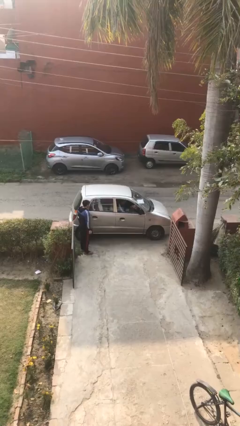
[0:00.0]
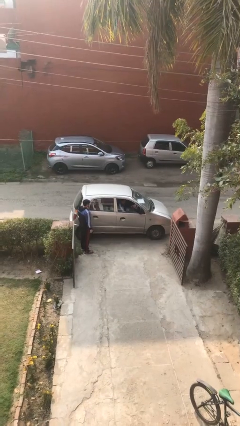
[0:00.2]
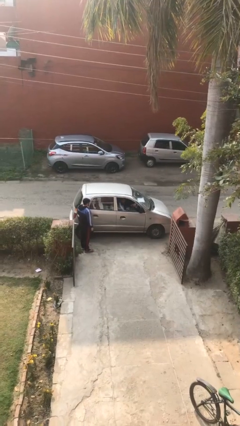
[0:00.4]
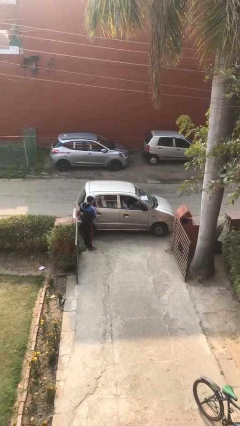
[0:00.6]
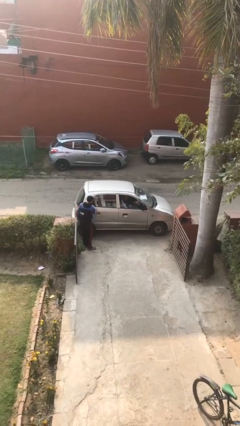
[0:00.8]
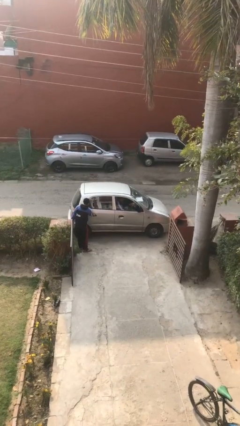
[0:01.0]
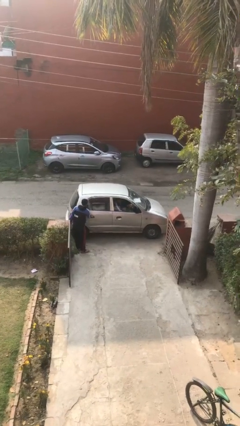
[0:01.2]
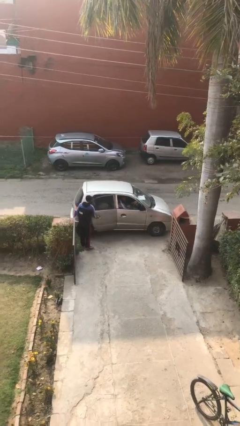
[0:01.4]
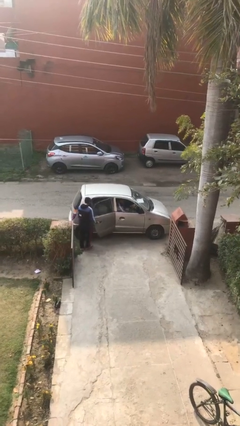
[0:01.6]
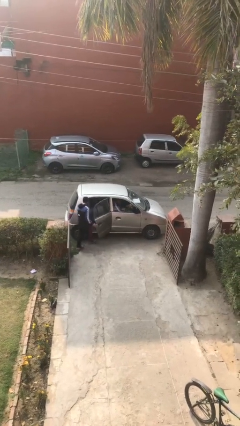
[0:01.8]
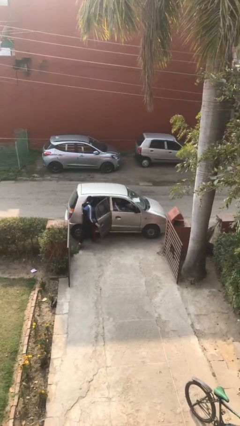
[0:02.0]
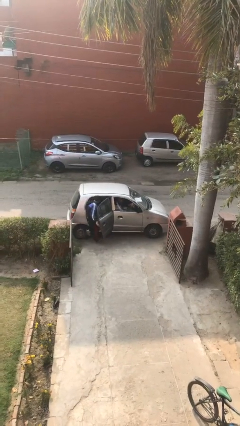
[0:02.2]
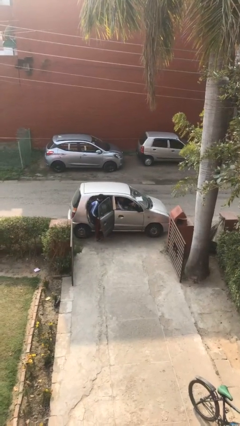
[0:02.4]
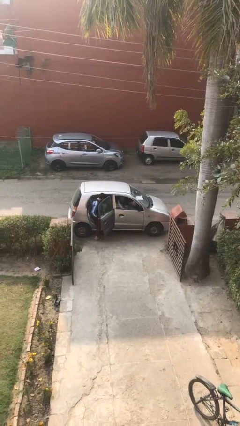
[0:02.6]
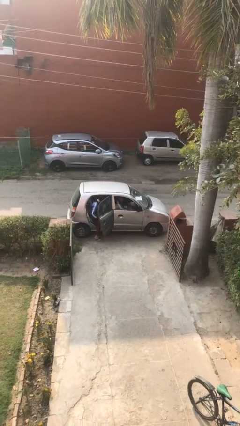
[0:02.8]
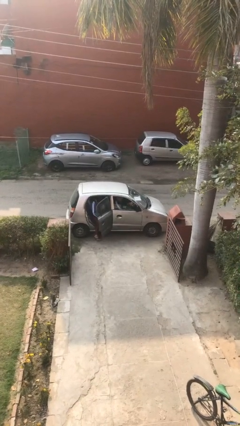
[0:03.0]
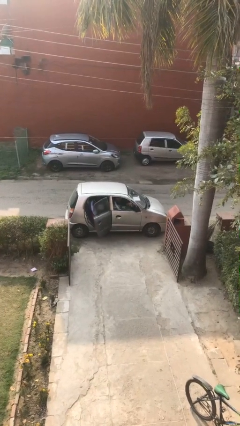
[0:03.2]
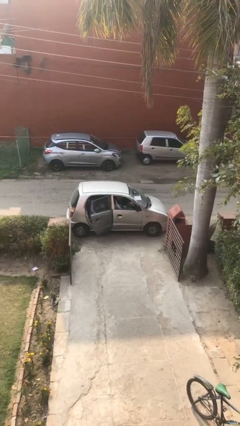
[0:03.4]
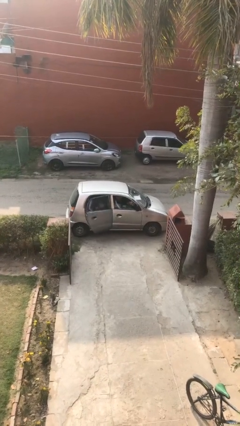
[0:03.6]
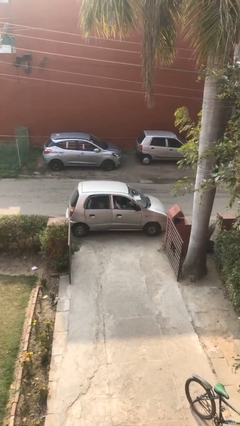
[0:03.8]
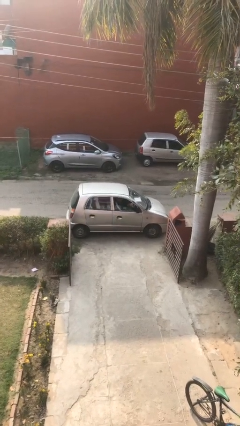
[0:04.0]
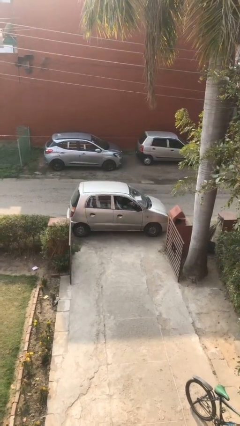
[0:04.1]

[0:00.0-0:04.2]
car picks up person

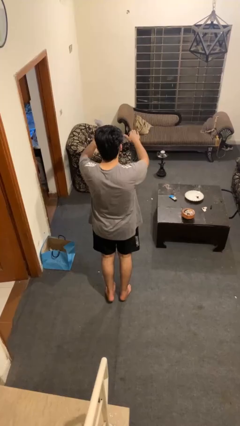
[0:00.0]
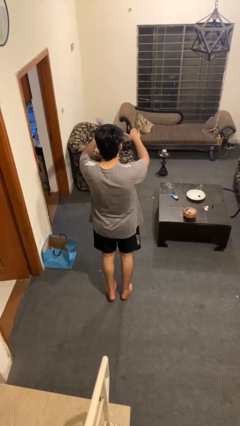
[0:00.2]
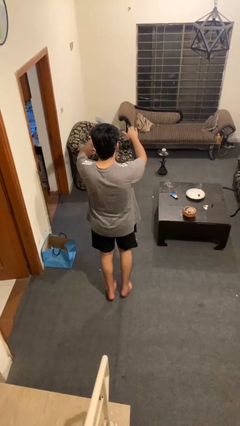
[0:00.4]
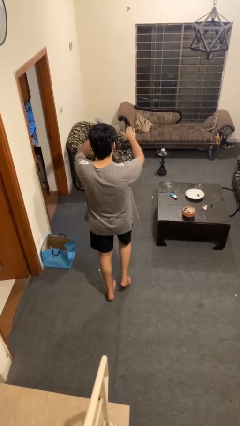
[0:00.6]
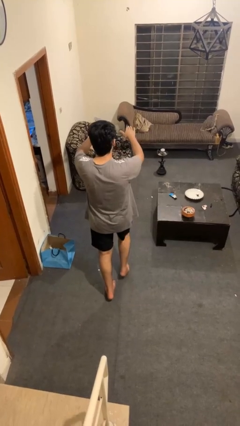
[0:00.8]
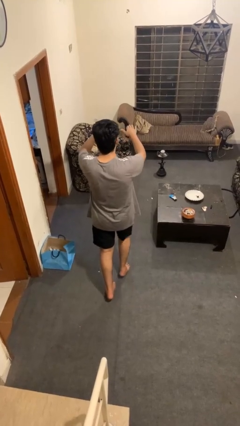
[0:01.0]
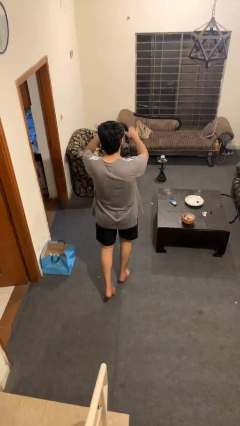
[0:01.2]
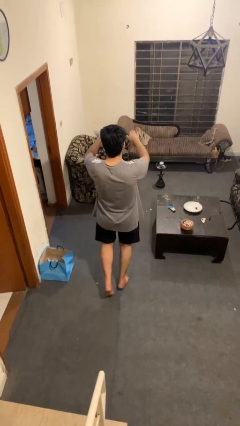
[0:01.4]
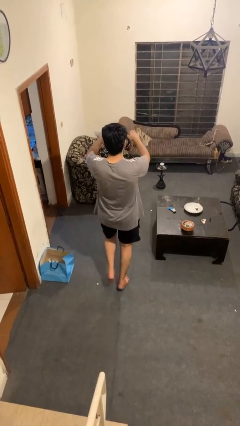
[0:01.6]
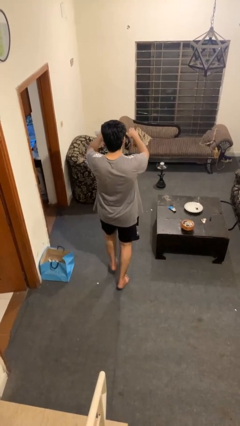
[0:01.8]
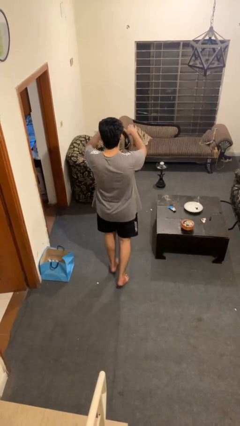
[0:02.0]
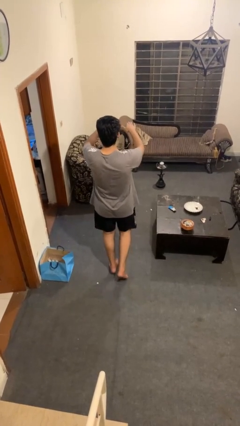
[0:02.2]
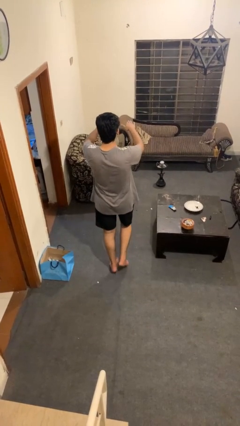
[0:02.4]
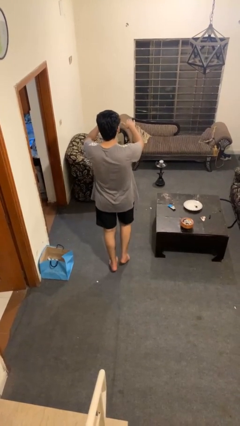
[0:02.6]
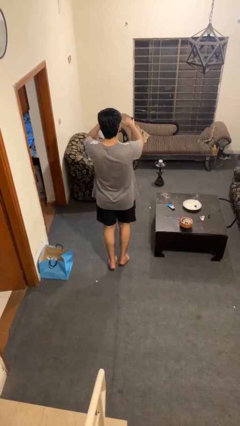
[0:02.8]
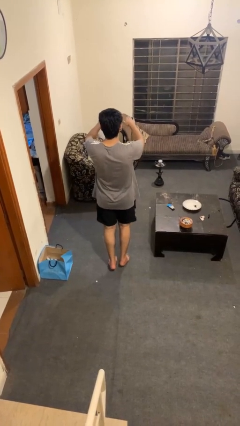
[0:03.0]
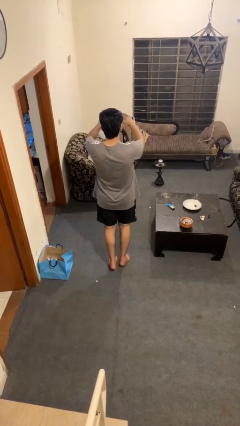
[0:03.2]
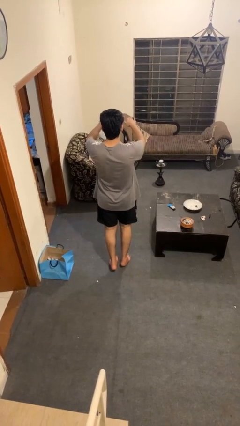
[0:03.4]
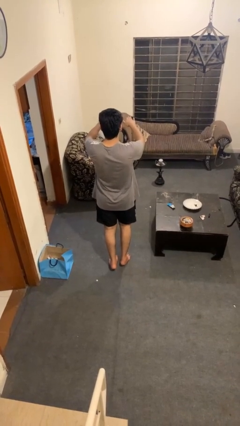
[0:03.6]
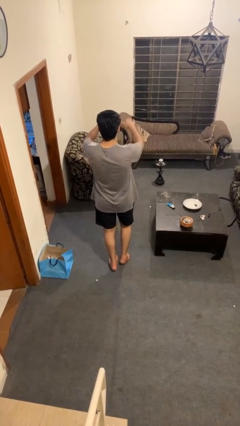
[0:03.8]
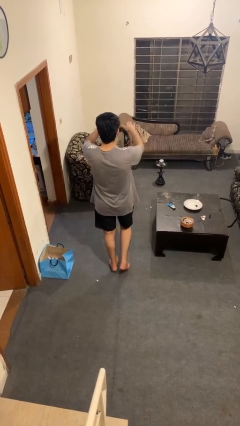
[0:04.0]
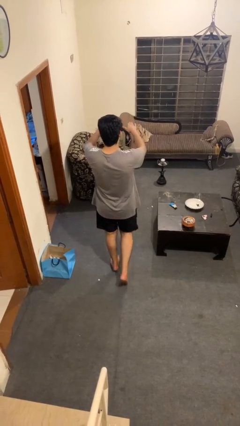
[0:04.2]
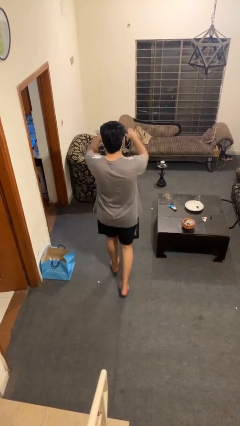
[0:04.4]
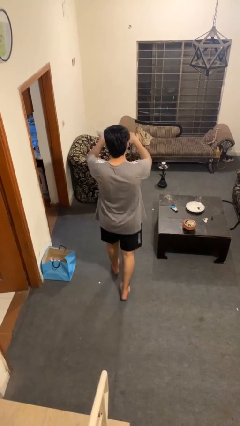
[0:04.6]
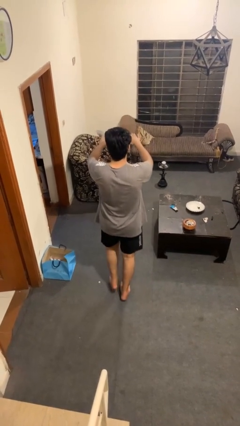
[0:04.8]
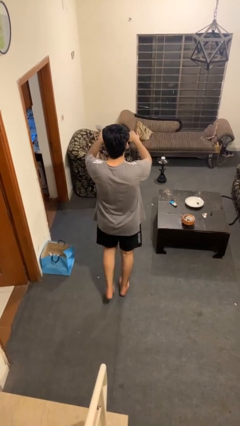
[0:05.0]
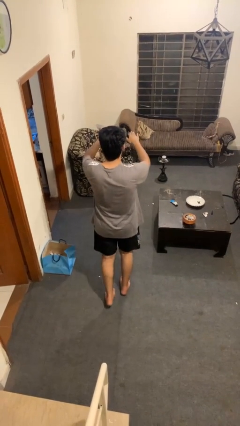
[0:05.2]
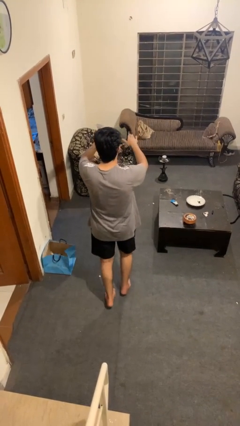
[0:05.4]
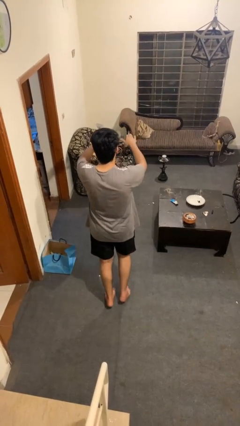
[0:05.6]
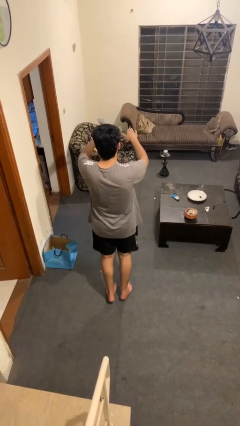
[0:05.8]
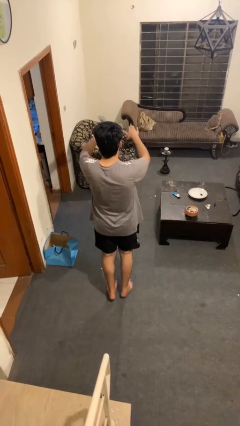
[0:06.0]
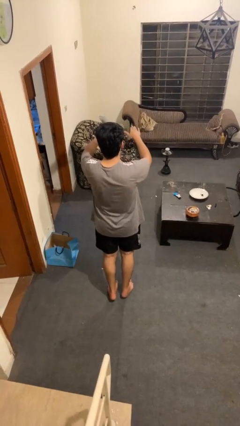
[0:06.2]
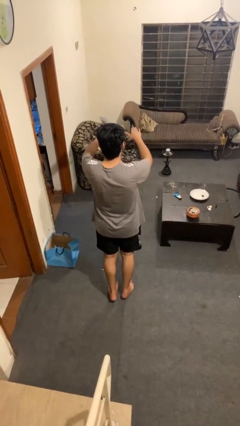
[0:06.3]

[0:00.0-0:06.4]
person walks tiptoe

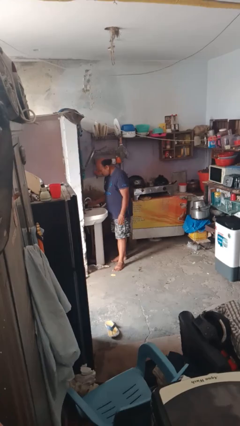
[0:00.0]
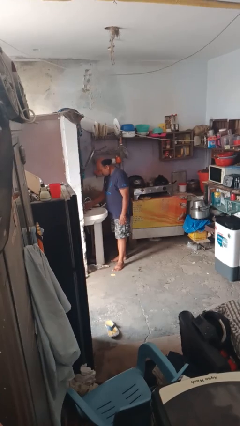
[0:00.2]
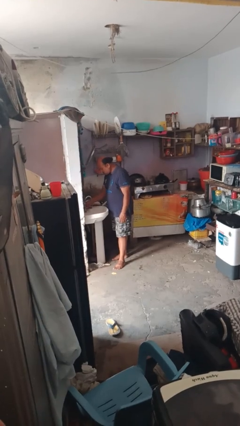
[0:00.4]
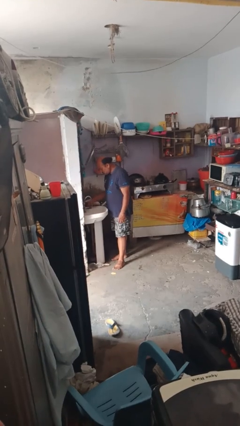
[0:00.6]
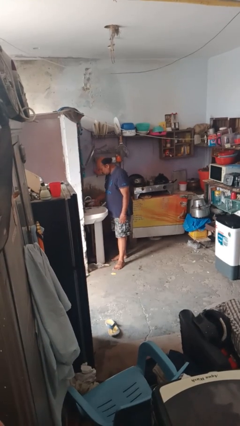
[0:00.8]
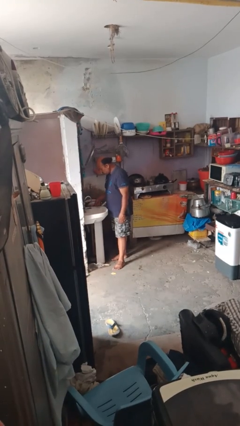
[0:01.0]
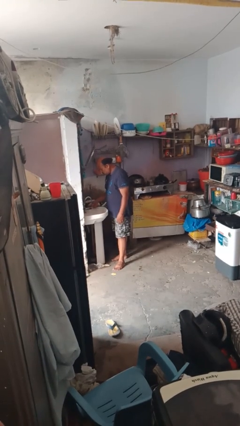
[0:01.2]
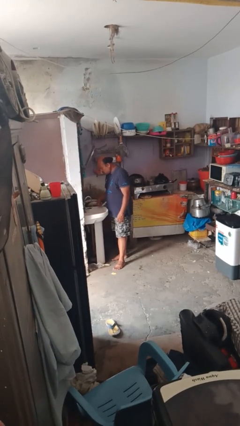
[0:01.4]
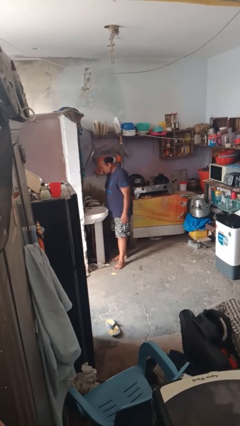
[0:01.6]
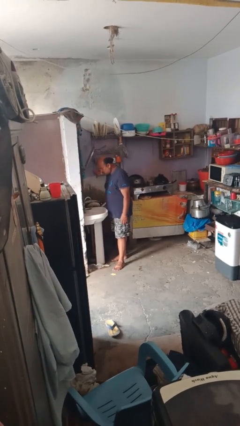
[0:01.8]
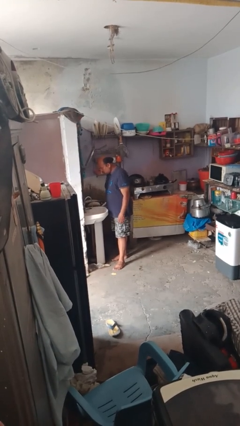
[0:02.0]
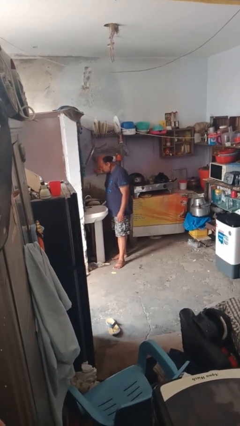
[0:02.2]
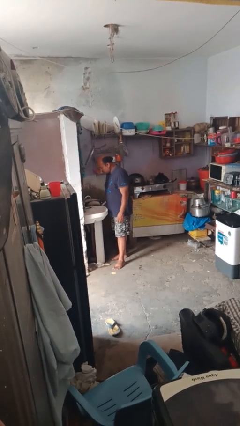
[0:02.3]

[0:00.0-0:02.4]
person turns off faucet

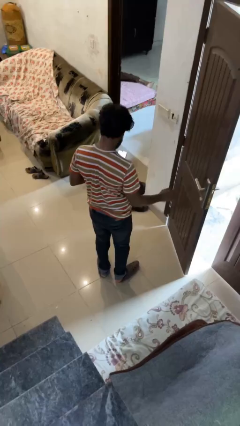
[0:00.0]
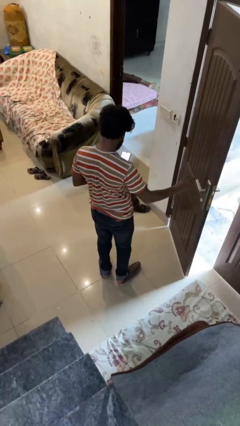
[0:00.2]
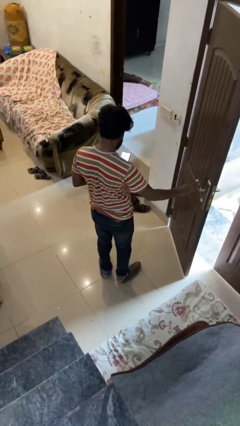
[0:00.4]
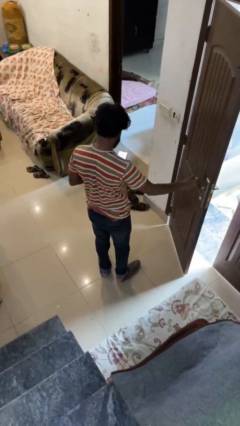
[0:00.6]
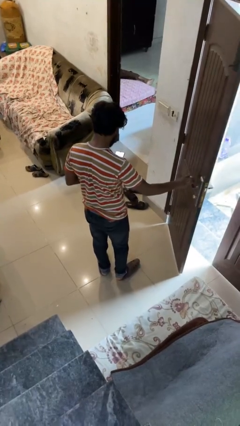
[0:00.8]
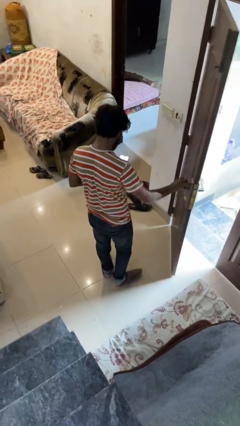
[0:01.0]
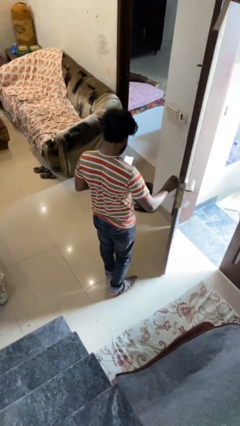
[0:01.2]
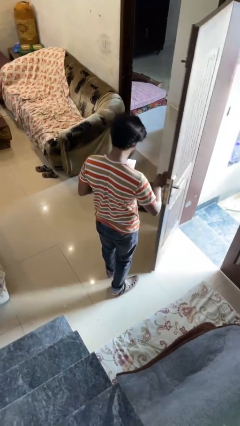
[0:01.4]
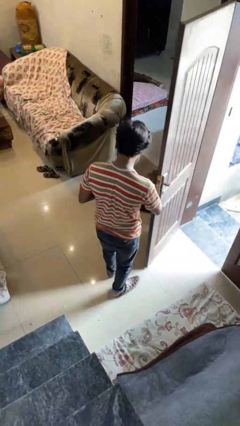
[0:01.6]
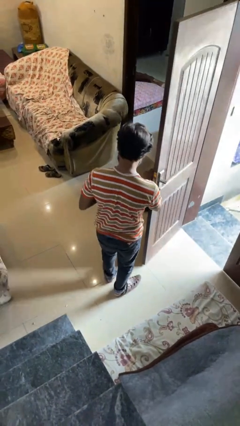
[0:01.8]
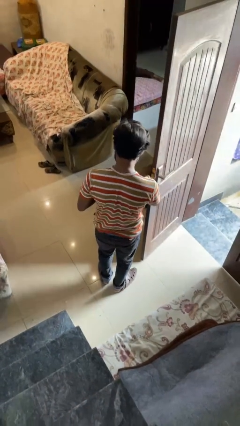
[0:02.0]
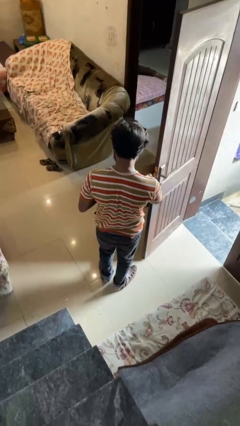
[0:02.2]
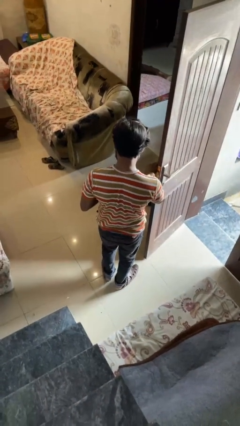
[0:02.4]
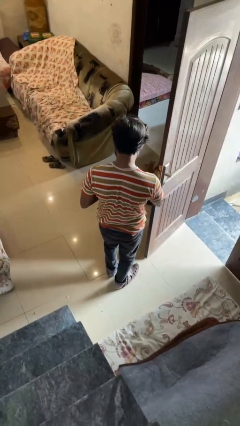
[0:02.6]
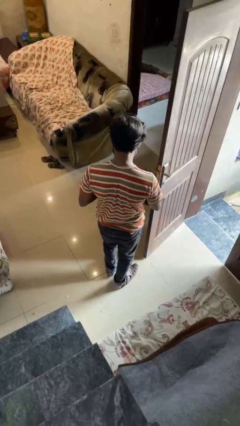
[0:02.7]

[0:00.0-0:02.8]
person opens facility door

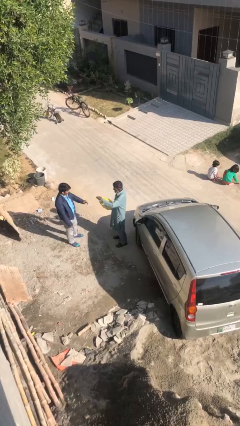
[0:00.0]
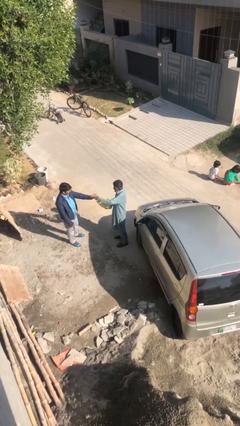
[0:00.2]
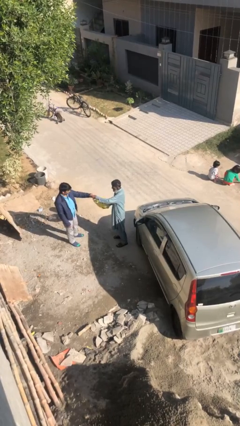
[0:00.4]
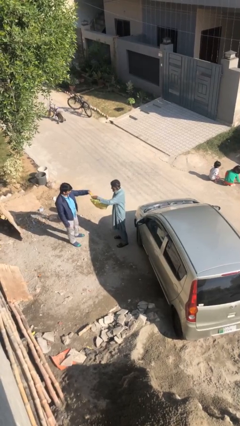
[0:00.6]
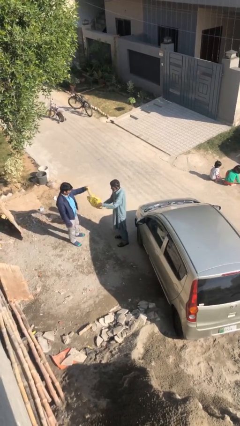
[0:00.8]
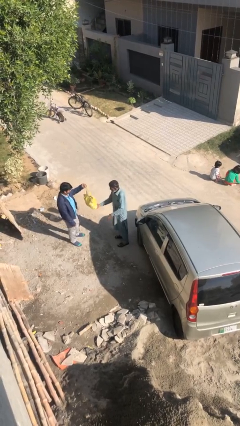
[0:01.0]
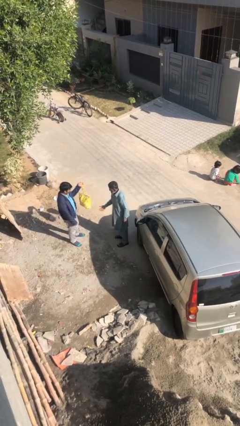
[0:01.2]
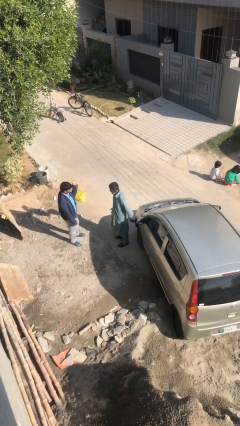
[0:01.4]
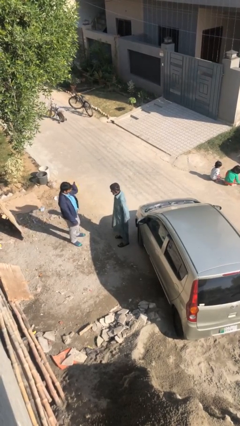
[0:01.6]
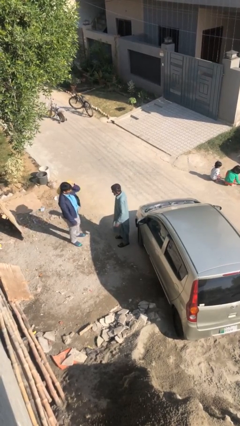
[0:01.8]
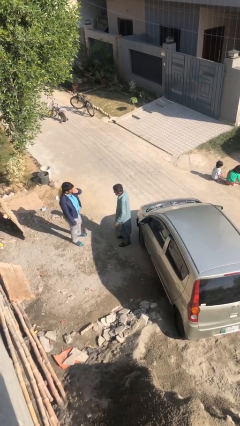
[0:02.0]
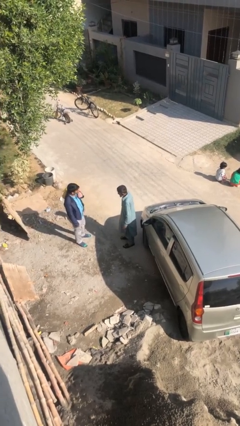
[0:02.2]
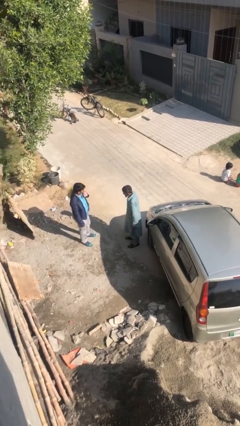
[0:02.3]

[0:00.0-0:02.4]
person transfers object to person
